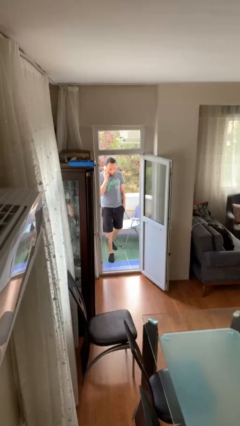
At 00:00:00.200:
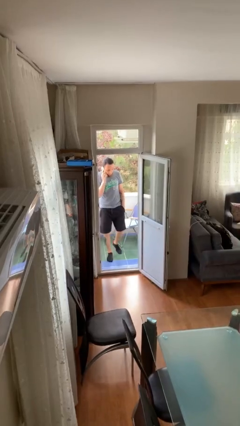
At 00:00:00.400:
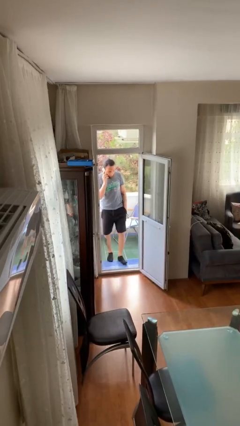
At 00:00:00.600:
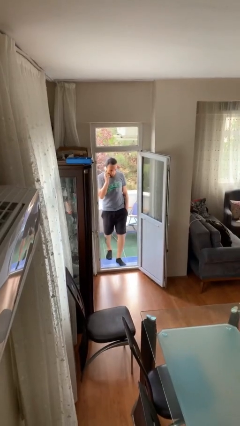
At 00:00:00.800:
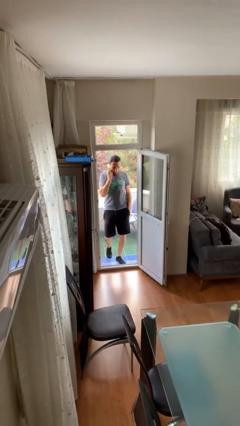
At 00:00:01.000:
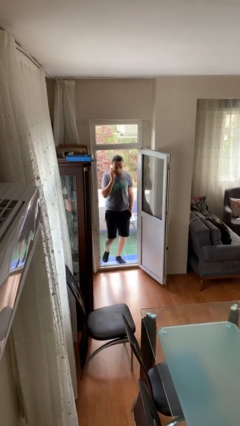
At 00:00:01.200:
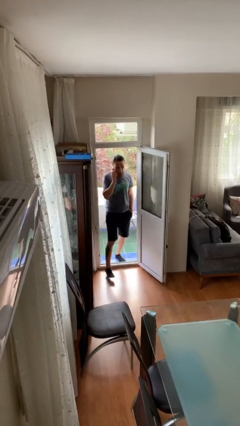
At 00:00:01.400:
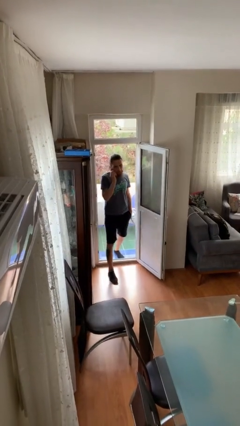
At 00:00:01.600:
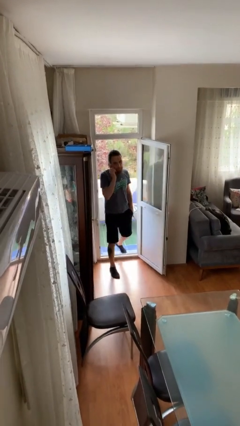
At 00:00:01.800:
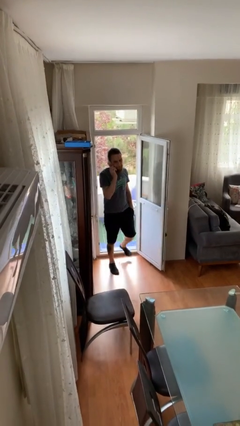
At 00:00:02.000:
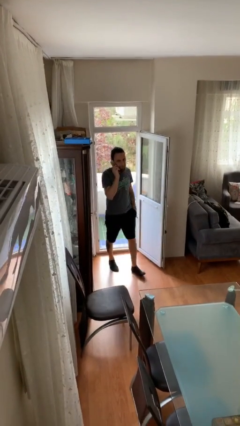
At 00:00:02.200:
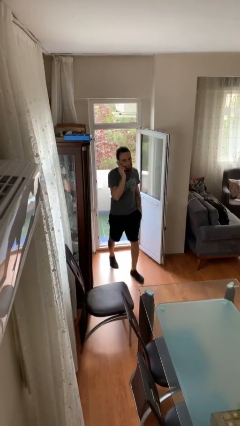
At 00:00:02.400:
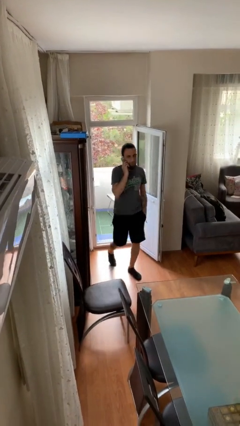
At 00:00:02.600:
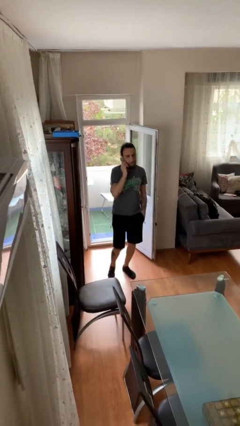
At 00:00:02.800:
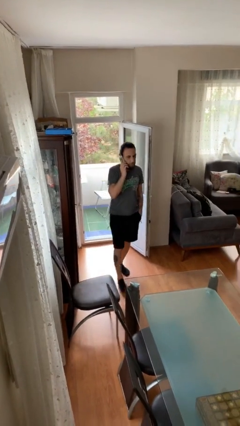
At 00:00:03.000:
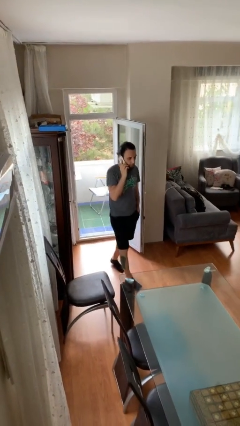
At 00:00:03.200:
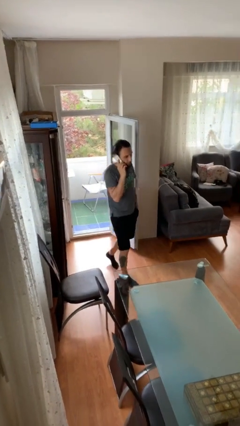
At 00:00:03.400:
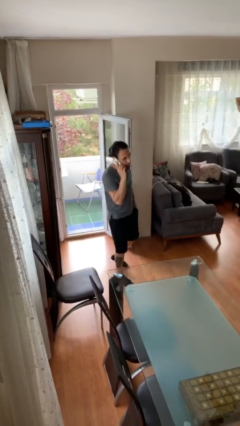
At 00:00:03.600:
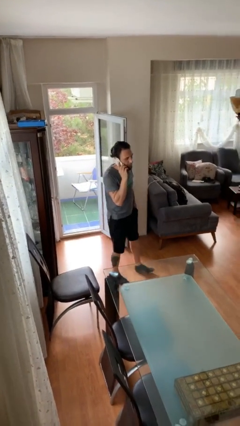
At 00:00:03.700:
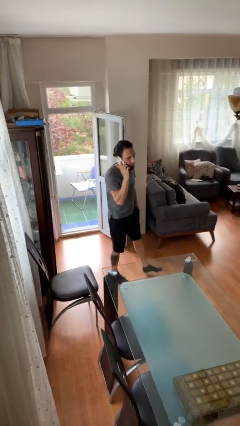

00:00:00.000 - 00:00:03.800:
person enters scene through structure

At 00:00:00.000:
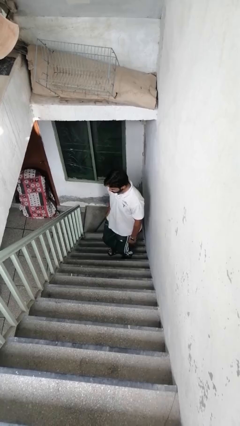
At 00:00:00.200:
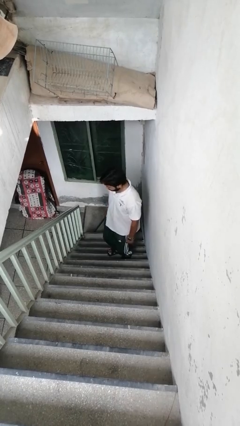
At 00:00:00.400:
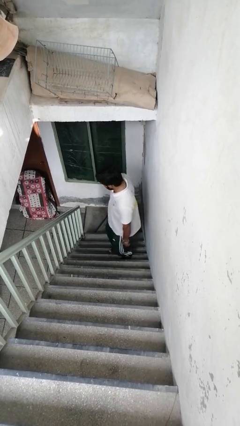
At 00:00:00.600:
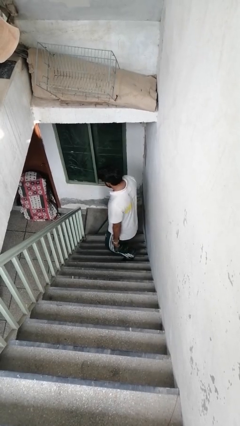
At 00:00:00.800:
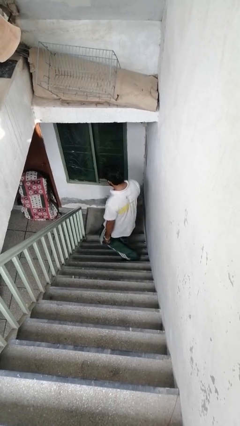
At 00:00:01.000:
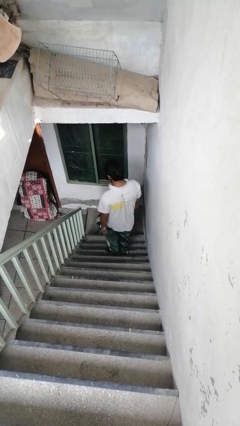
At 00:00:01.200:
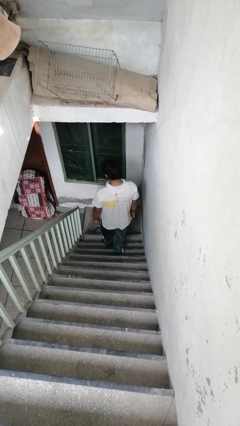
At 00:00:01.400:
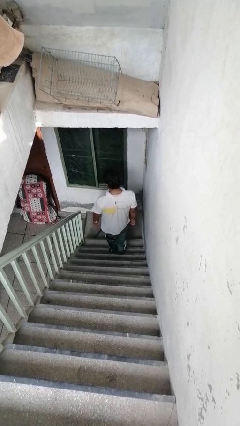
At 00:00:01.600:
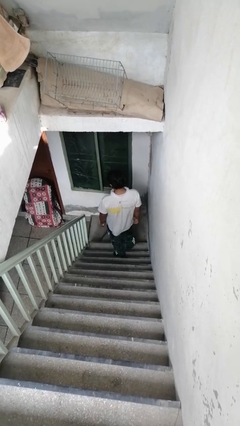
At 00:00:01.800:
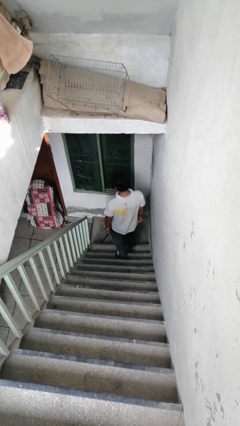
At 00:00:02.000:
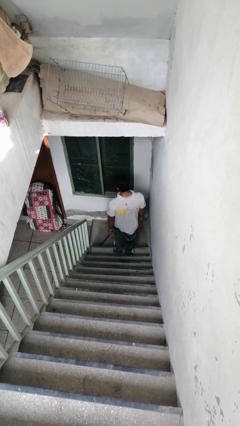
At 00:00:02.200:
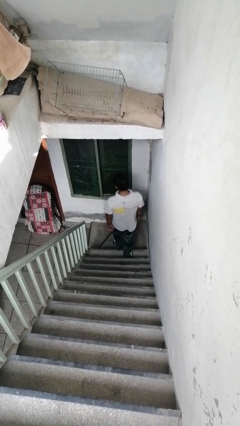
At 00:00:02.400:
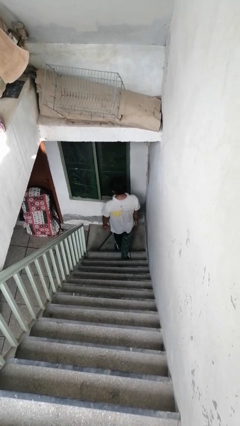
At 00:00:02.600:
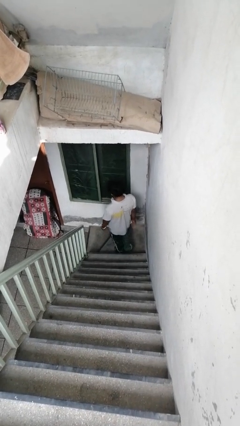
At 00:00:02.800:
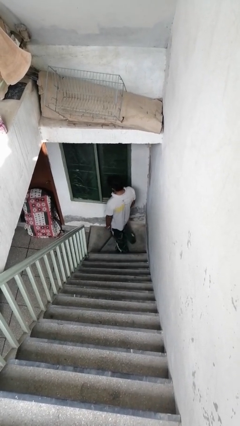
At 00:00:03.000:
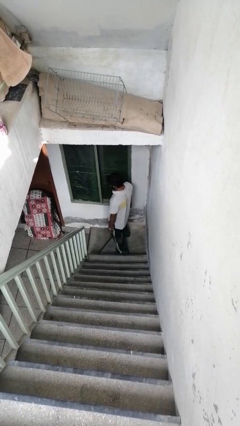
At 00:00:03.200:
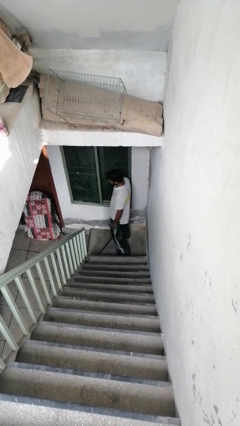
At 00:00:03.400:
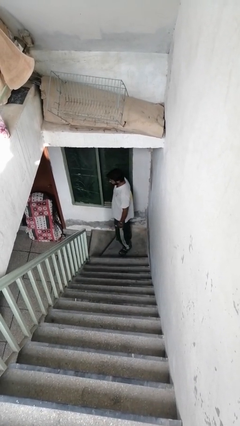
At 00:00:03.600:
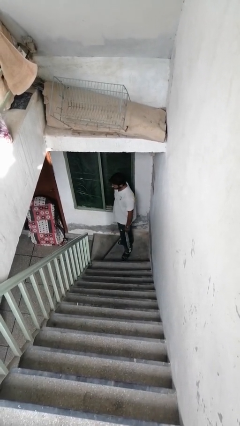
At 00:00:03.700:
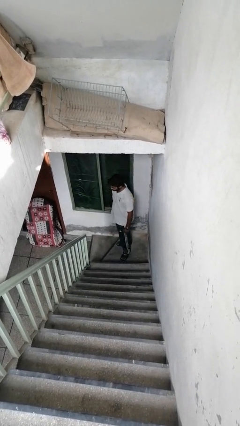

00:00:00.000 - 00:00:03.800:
person climbs down stairs

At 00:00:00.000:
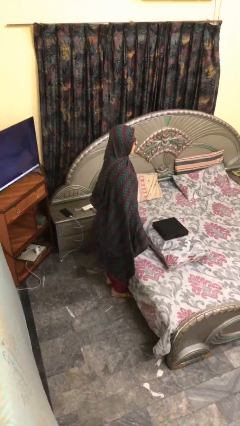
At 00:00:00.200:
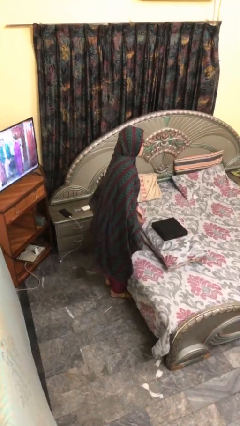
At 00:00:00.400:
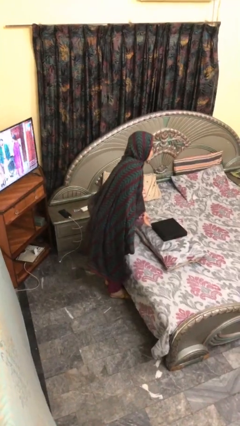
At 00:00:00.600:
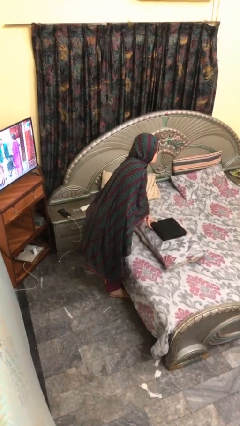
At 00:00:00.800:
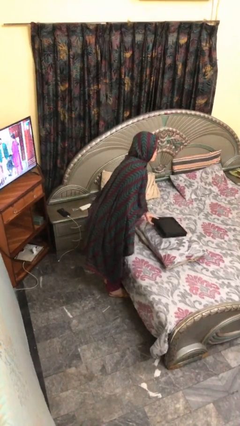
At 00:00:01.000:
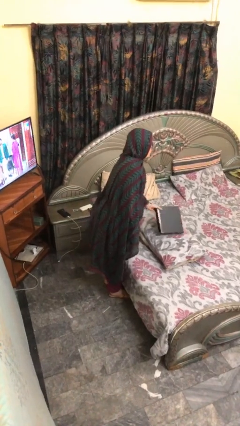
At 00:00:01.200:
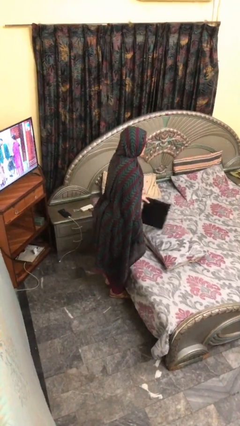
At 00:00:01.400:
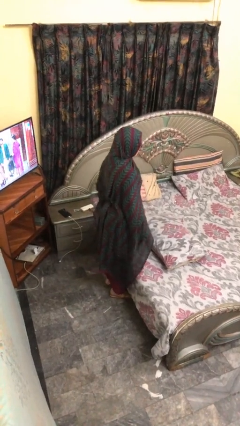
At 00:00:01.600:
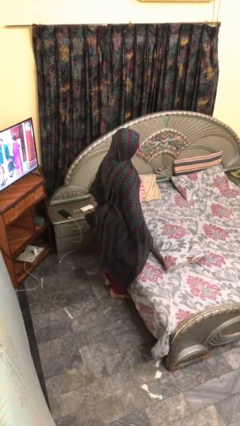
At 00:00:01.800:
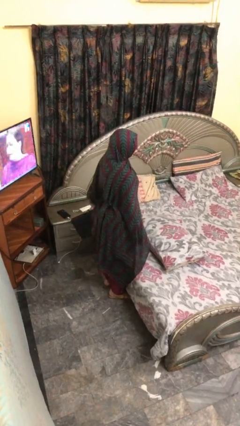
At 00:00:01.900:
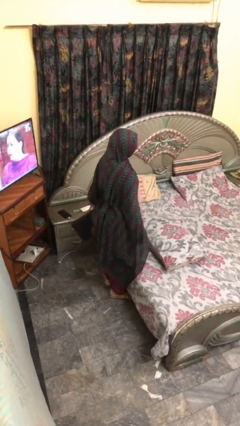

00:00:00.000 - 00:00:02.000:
person picks up object from bed

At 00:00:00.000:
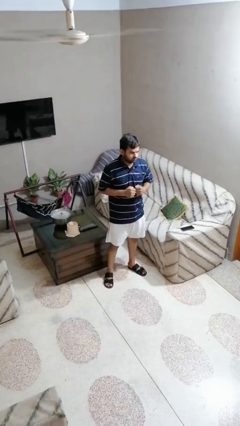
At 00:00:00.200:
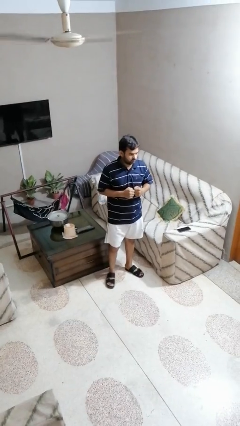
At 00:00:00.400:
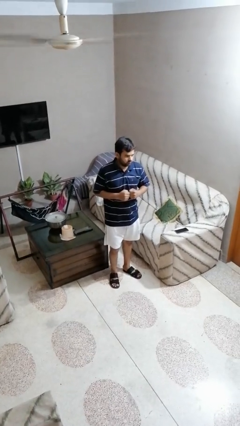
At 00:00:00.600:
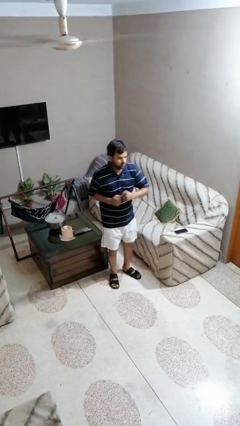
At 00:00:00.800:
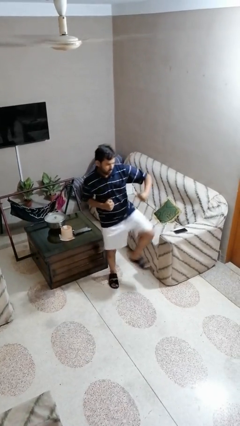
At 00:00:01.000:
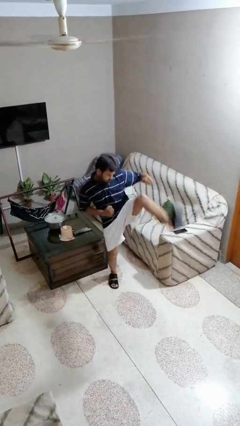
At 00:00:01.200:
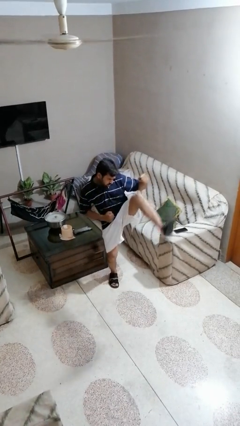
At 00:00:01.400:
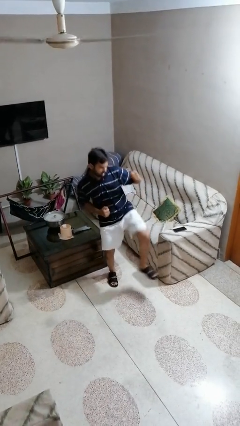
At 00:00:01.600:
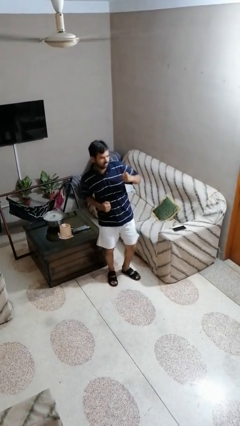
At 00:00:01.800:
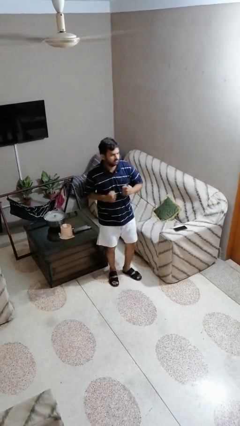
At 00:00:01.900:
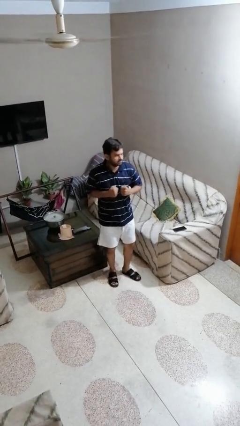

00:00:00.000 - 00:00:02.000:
person karate kicks

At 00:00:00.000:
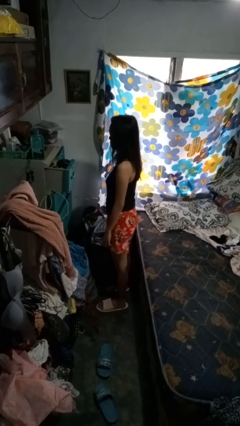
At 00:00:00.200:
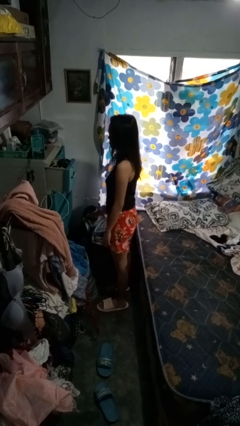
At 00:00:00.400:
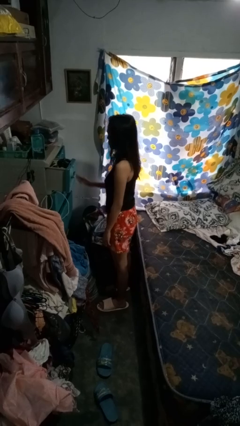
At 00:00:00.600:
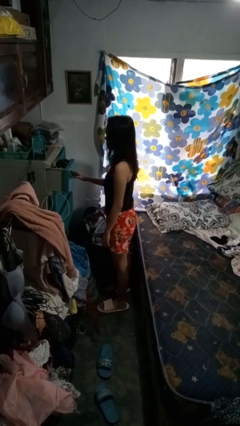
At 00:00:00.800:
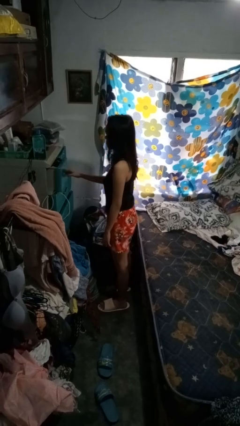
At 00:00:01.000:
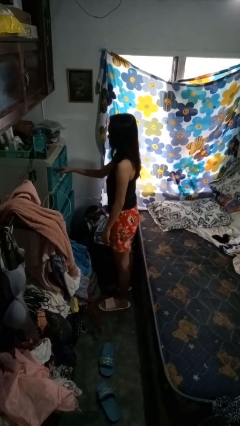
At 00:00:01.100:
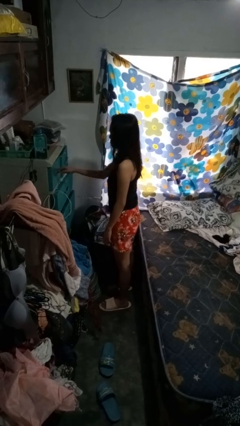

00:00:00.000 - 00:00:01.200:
person closes dresser drawer

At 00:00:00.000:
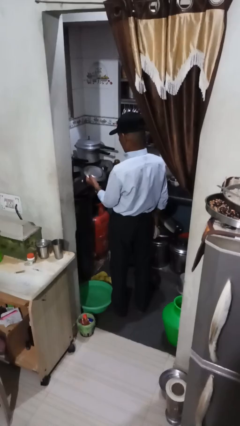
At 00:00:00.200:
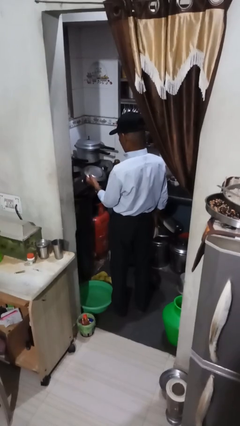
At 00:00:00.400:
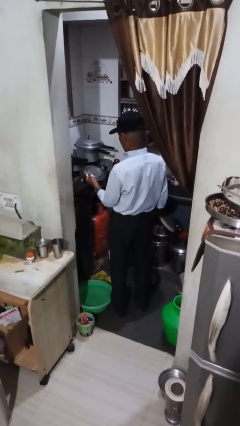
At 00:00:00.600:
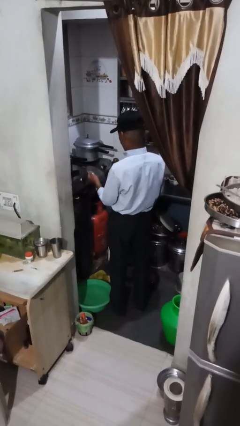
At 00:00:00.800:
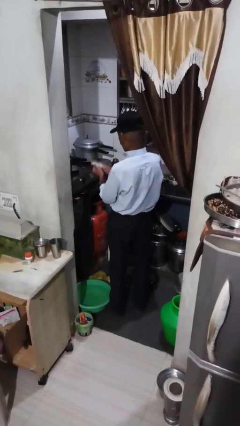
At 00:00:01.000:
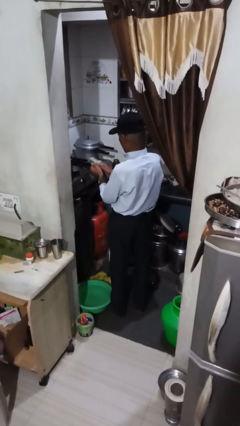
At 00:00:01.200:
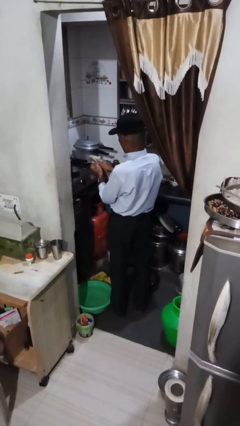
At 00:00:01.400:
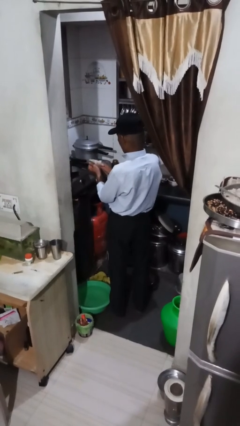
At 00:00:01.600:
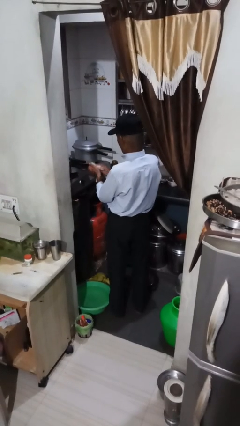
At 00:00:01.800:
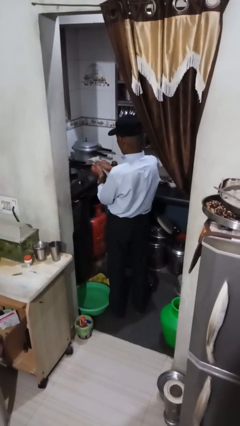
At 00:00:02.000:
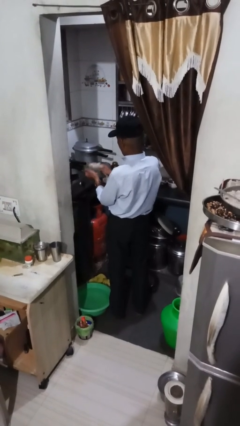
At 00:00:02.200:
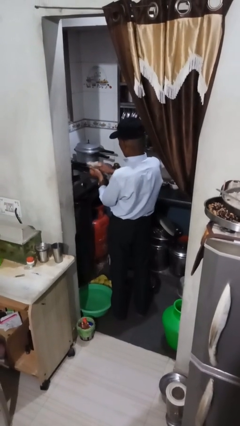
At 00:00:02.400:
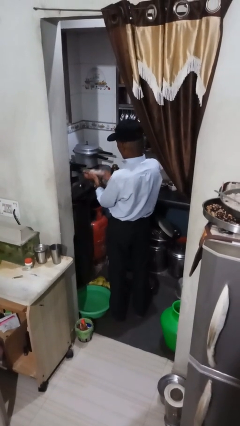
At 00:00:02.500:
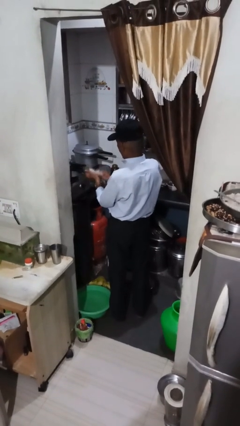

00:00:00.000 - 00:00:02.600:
person dries dish

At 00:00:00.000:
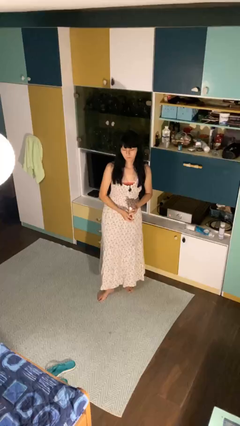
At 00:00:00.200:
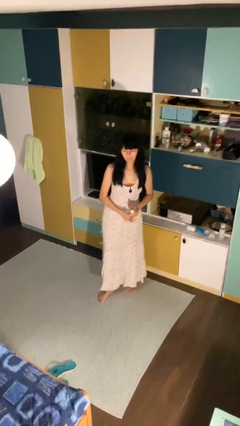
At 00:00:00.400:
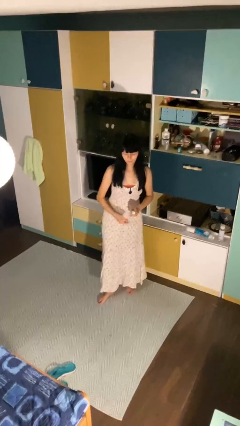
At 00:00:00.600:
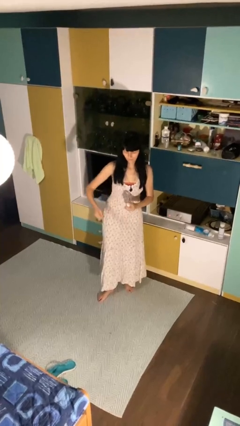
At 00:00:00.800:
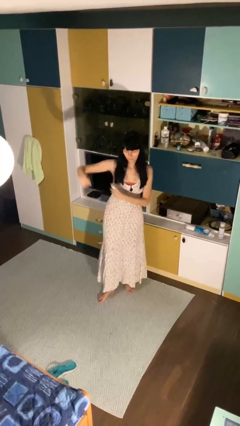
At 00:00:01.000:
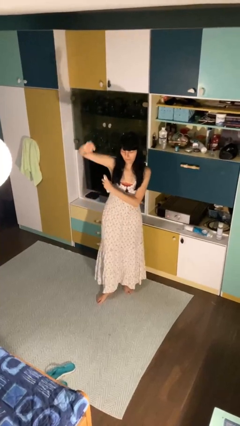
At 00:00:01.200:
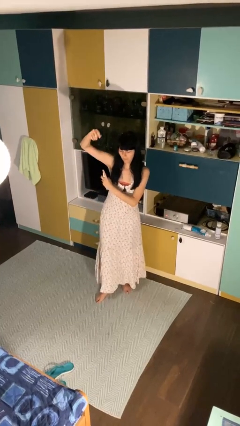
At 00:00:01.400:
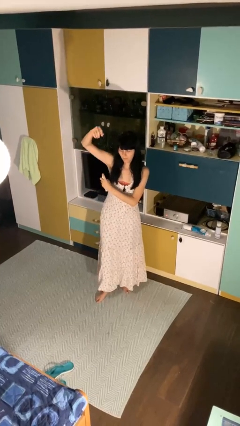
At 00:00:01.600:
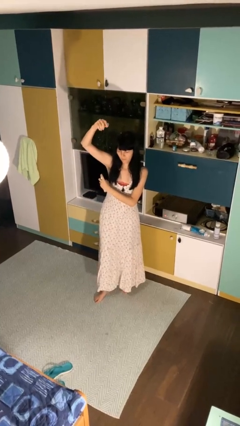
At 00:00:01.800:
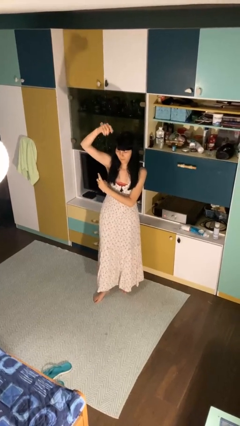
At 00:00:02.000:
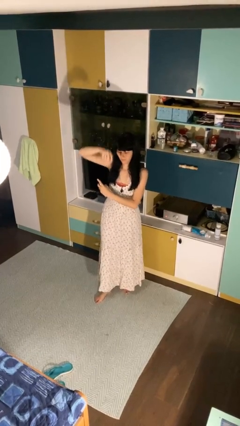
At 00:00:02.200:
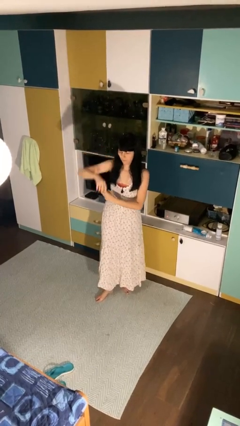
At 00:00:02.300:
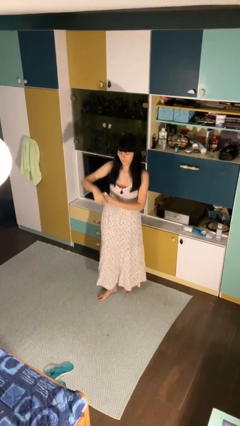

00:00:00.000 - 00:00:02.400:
person applies deodorant
